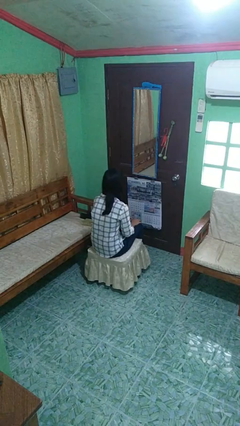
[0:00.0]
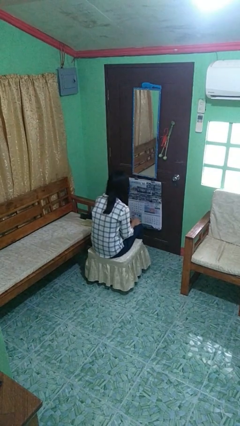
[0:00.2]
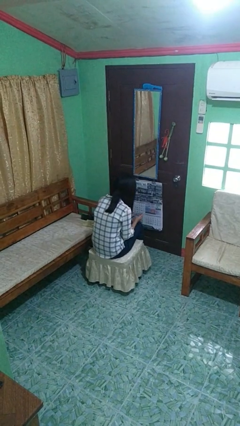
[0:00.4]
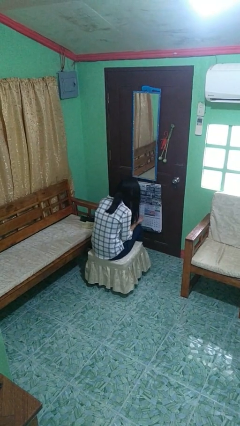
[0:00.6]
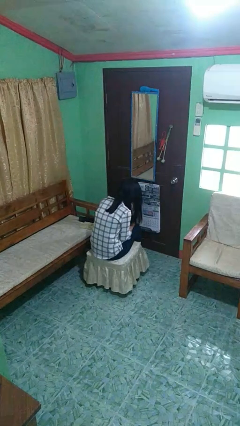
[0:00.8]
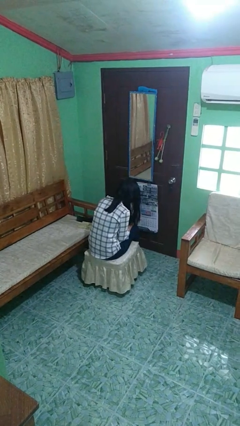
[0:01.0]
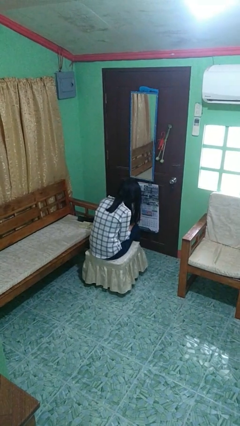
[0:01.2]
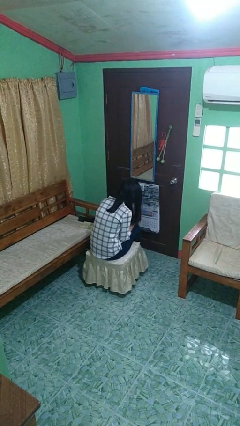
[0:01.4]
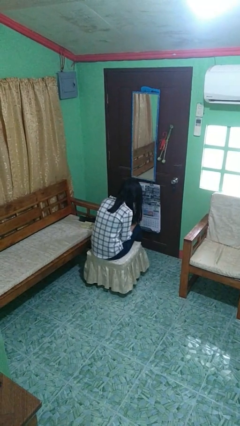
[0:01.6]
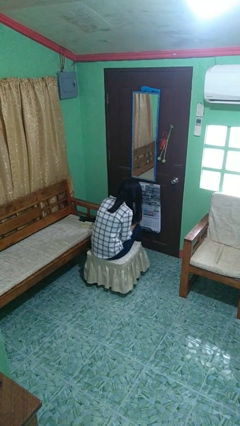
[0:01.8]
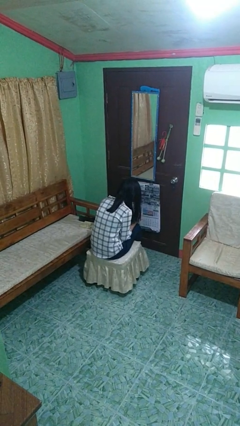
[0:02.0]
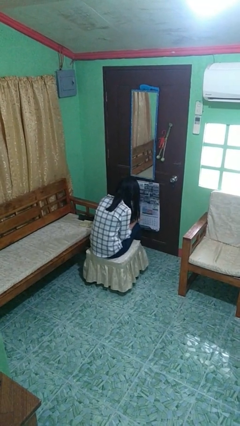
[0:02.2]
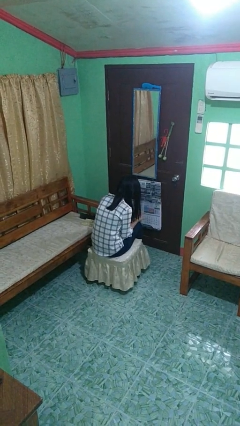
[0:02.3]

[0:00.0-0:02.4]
person looks at hands in lap

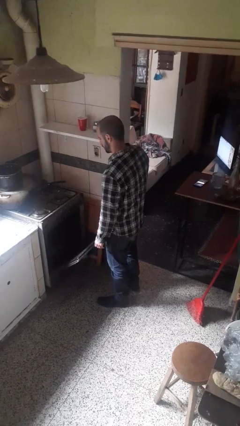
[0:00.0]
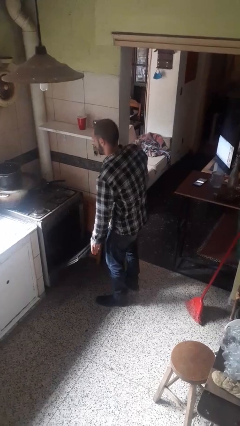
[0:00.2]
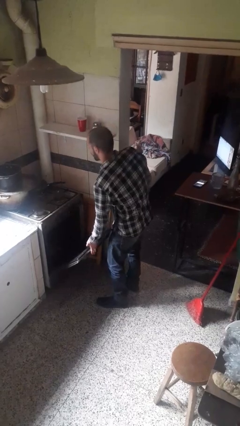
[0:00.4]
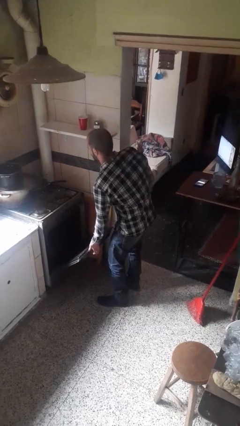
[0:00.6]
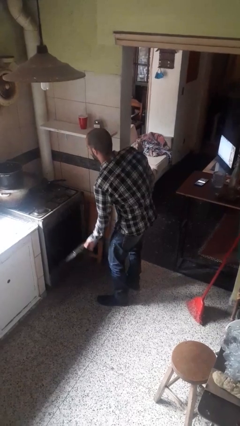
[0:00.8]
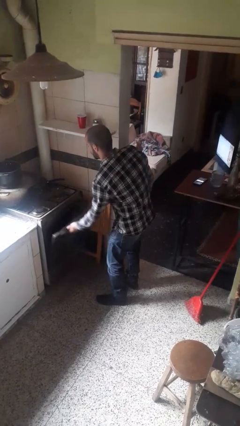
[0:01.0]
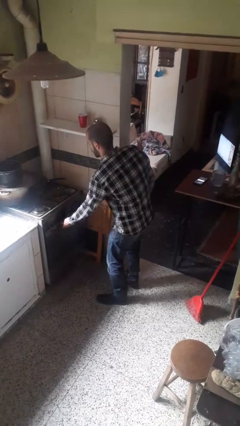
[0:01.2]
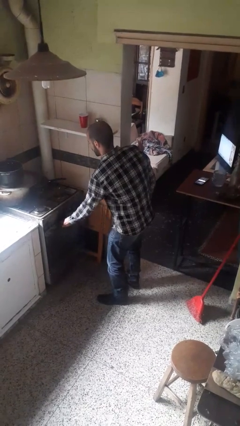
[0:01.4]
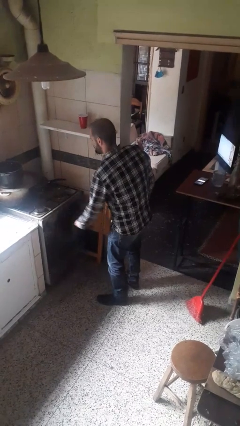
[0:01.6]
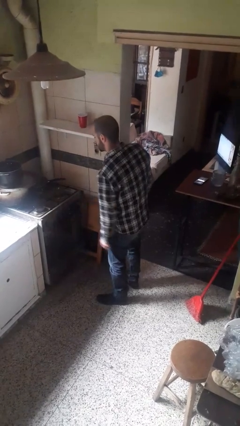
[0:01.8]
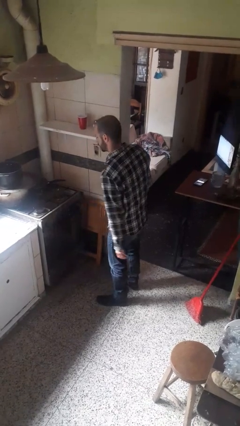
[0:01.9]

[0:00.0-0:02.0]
person closes oven door

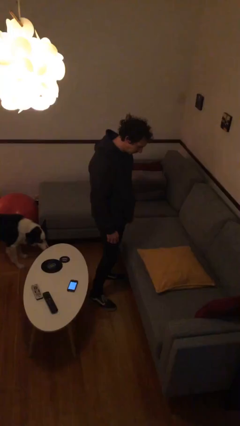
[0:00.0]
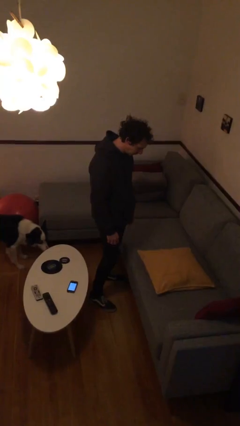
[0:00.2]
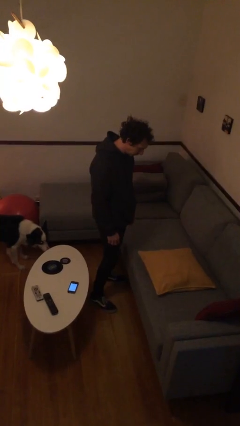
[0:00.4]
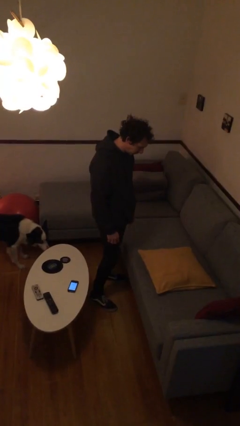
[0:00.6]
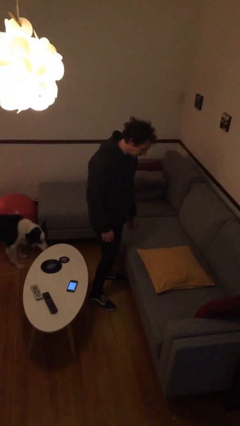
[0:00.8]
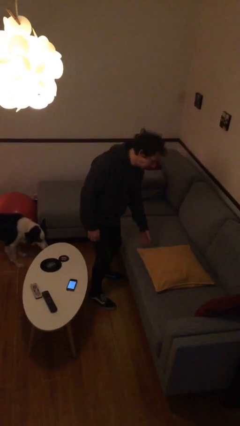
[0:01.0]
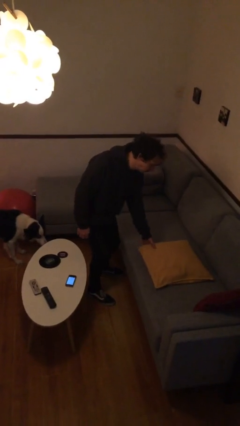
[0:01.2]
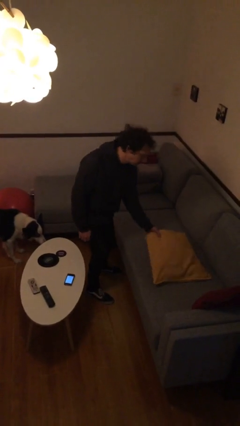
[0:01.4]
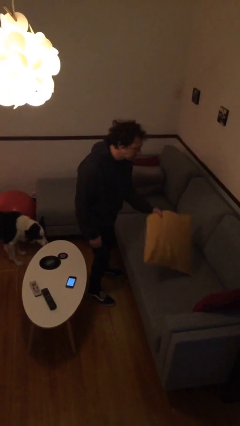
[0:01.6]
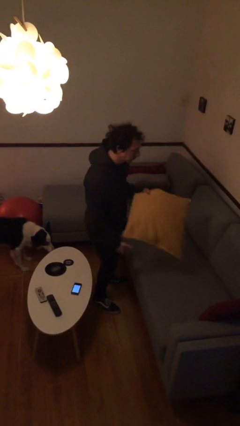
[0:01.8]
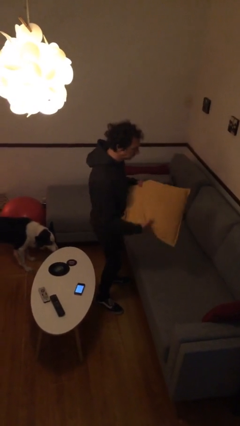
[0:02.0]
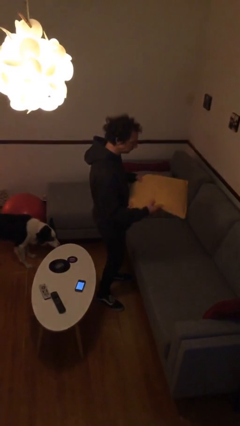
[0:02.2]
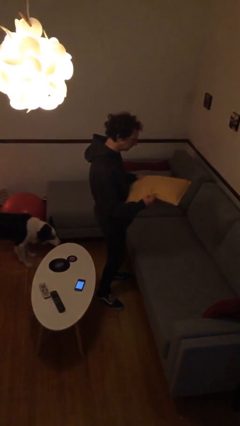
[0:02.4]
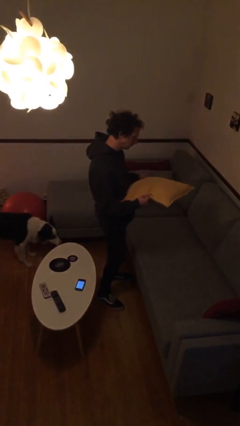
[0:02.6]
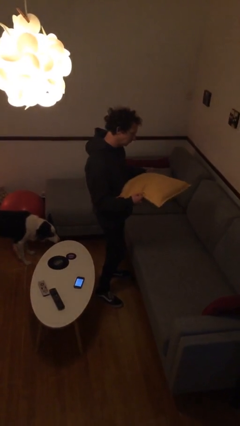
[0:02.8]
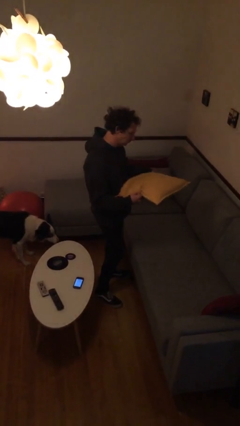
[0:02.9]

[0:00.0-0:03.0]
person picks up object from couch

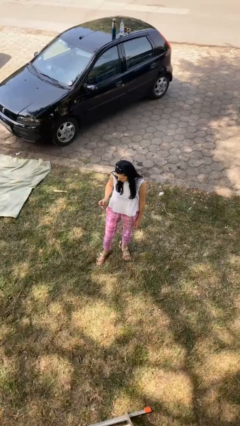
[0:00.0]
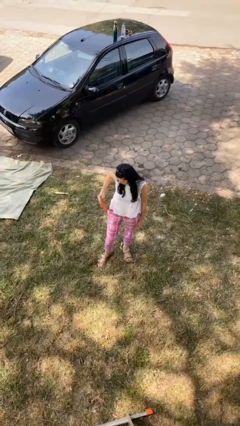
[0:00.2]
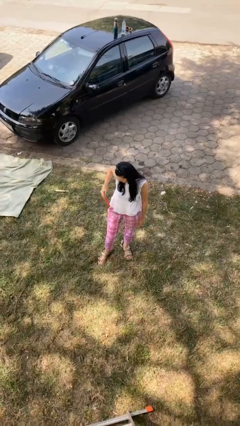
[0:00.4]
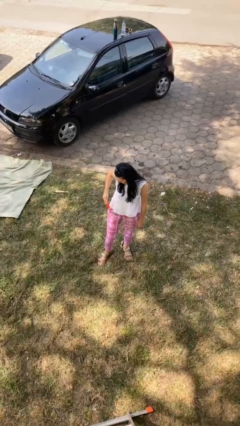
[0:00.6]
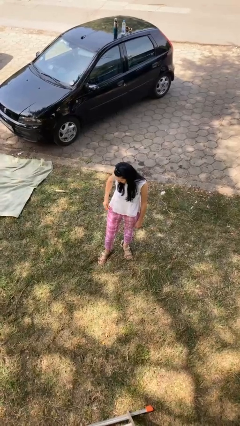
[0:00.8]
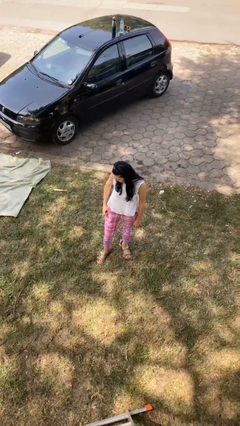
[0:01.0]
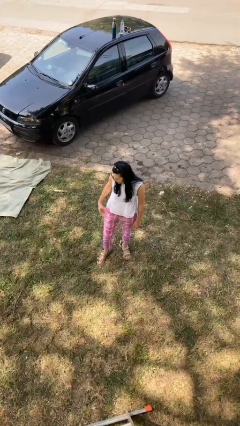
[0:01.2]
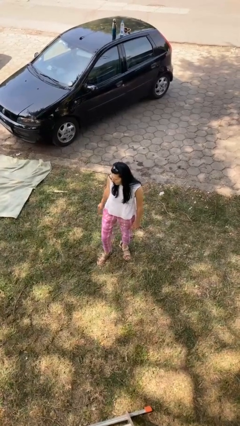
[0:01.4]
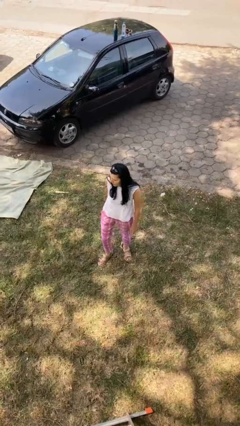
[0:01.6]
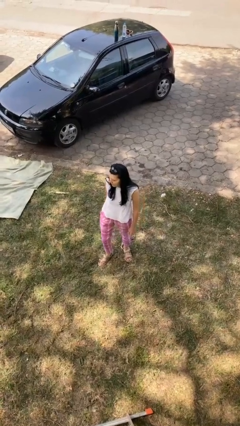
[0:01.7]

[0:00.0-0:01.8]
person puts phone into pocket

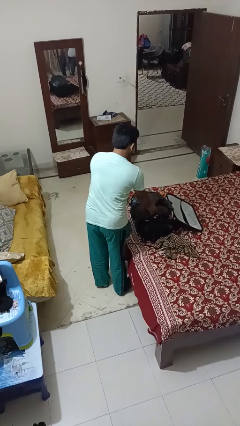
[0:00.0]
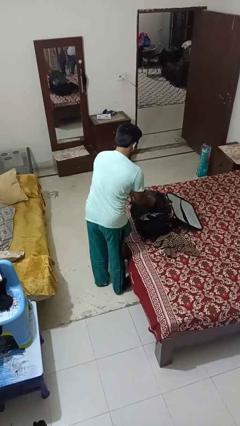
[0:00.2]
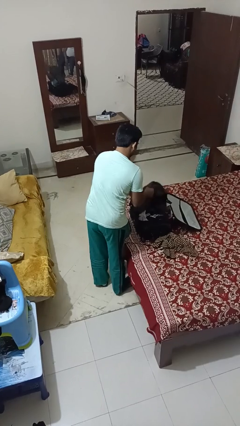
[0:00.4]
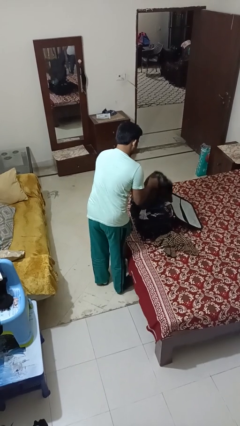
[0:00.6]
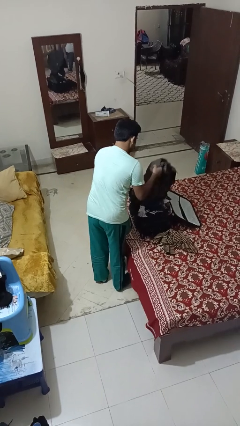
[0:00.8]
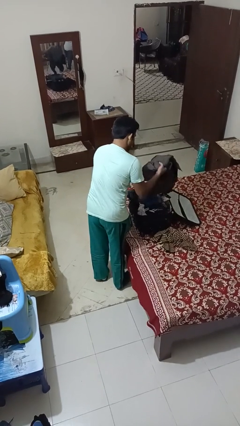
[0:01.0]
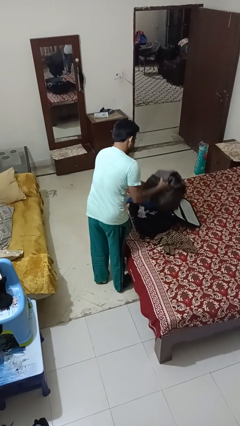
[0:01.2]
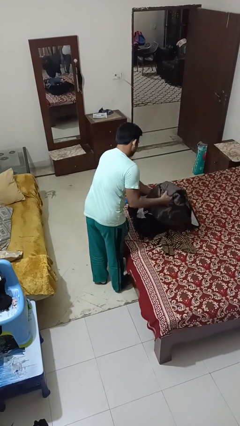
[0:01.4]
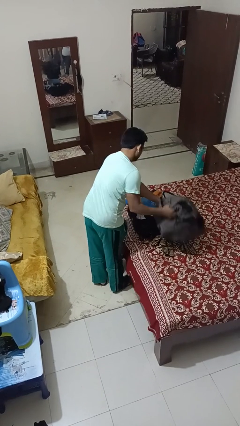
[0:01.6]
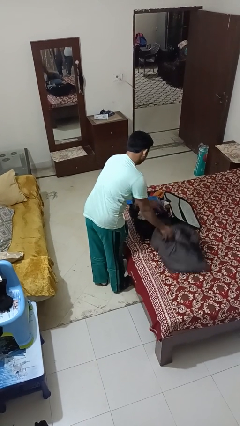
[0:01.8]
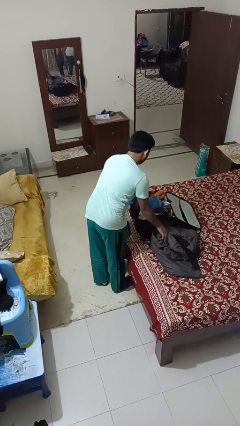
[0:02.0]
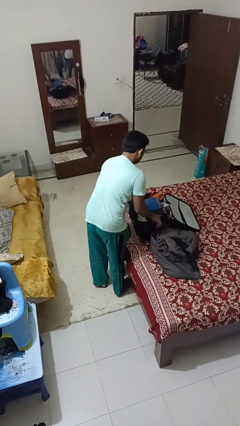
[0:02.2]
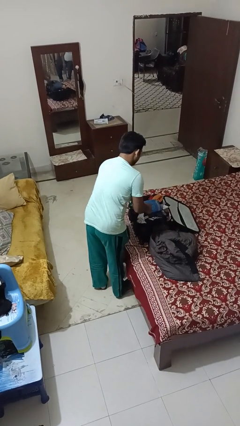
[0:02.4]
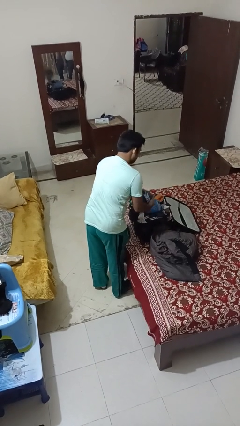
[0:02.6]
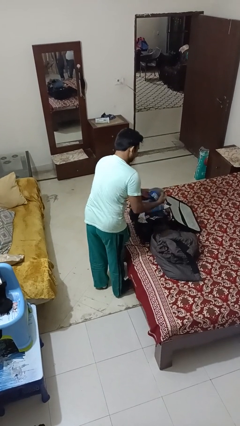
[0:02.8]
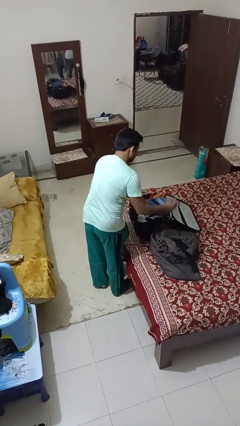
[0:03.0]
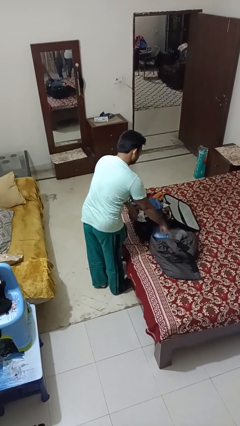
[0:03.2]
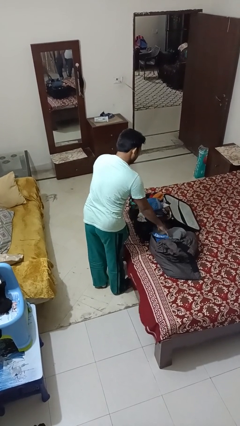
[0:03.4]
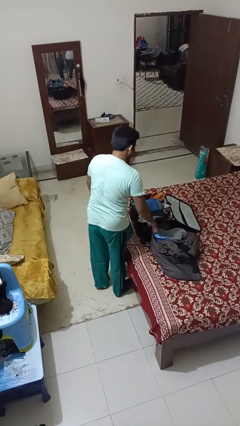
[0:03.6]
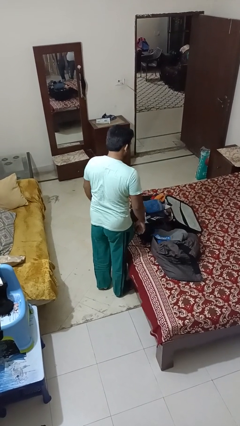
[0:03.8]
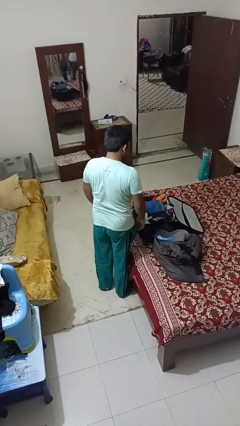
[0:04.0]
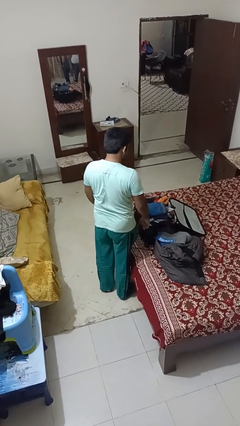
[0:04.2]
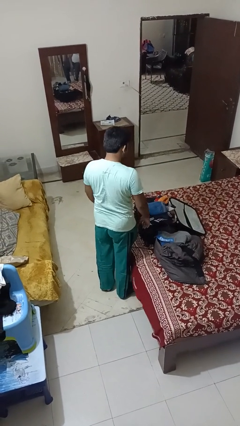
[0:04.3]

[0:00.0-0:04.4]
person unloads clothes from suitcase

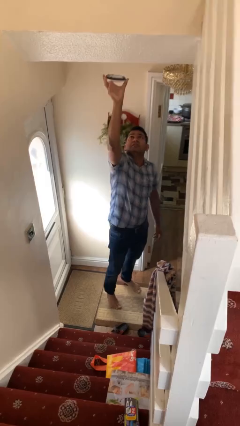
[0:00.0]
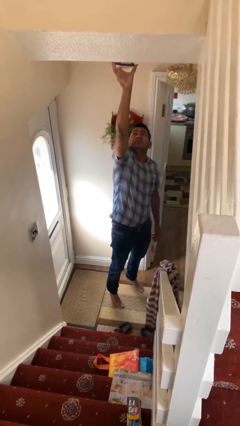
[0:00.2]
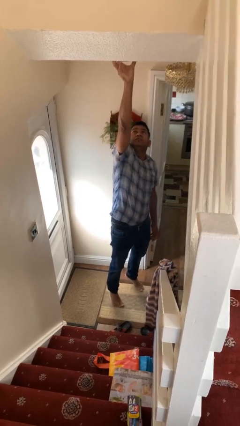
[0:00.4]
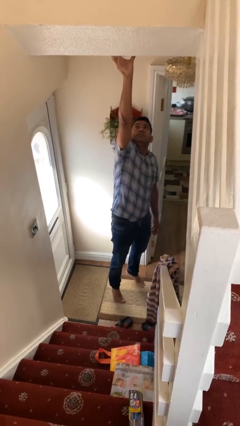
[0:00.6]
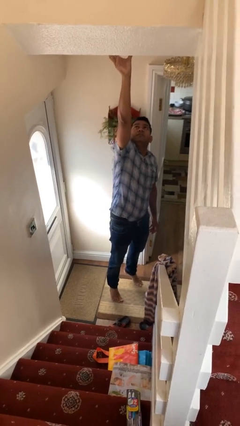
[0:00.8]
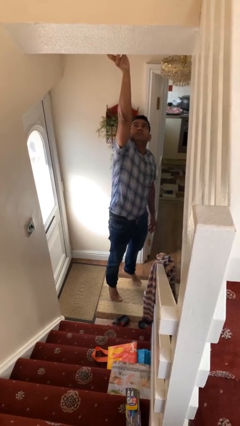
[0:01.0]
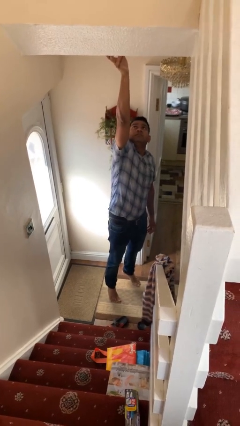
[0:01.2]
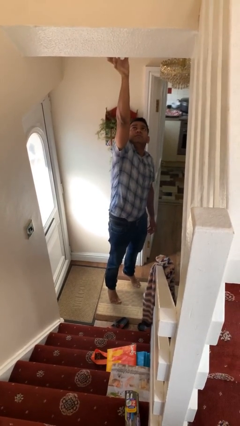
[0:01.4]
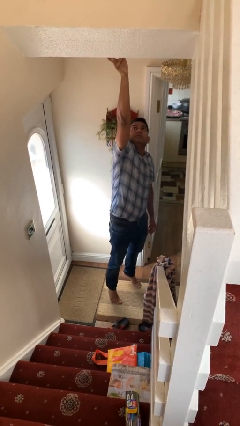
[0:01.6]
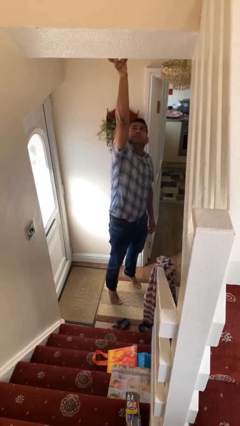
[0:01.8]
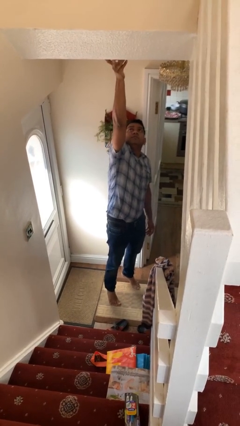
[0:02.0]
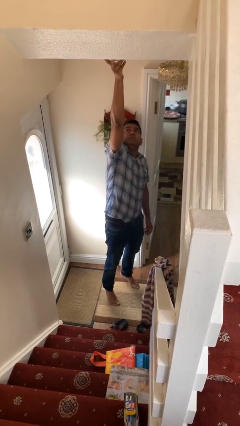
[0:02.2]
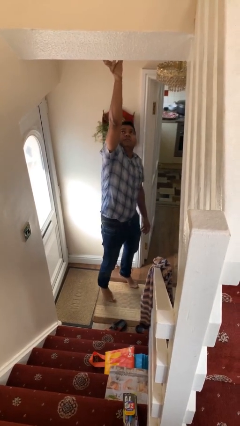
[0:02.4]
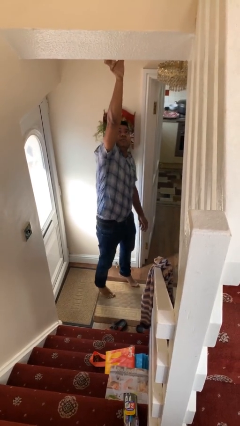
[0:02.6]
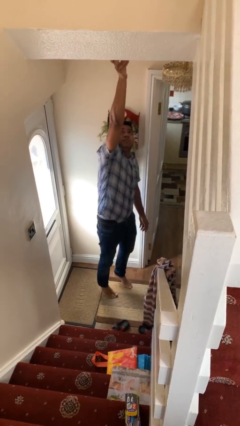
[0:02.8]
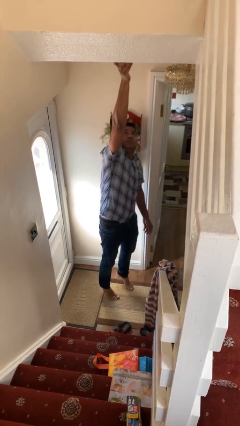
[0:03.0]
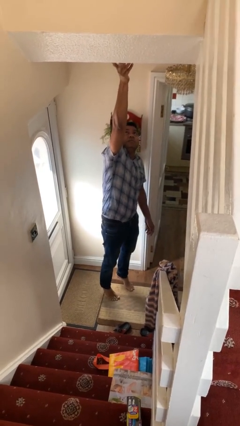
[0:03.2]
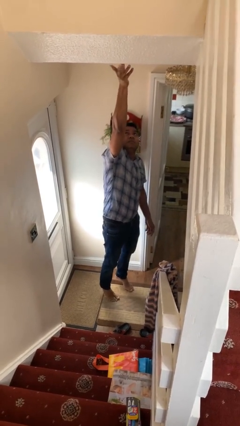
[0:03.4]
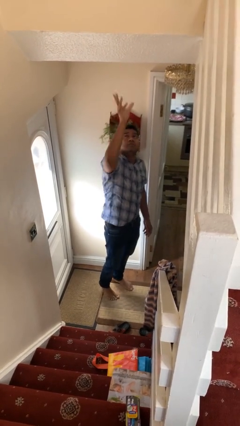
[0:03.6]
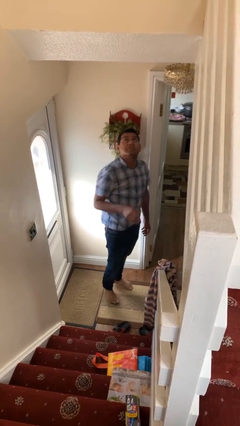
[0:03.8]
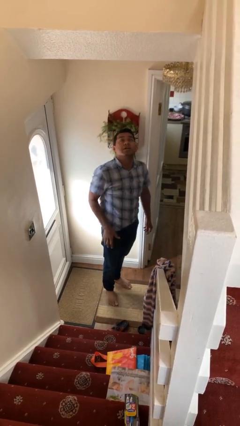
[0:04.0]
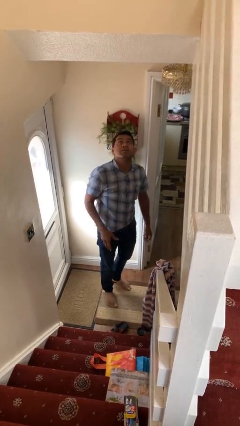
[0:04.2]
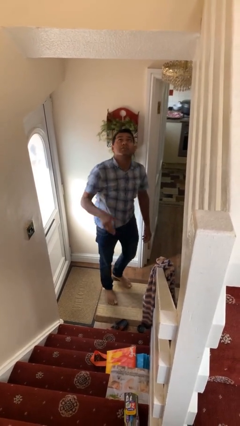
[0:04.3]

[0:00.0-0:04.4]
person puts up smoke detector
